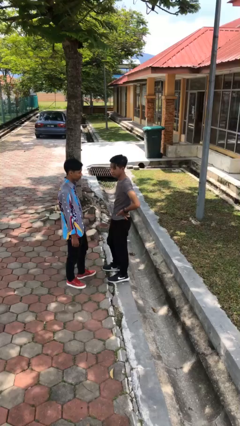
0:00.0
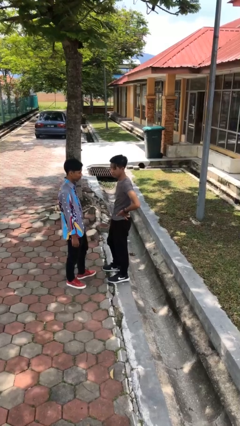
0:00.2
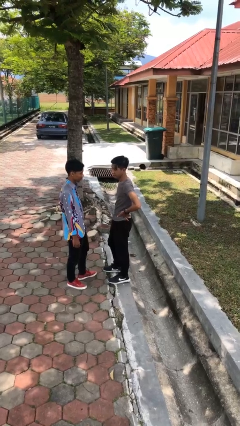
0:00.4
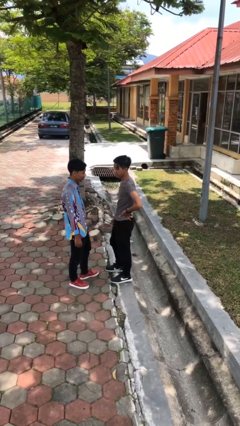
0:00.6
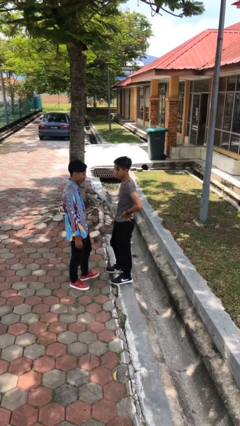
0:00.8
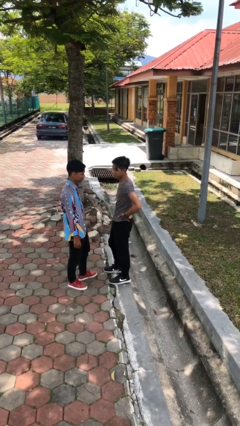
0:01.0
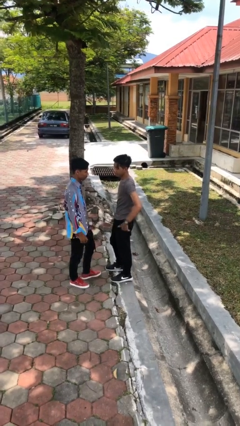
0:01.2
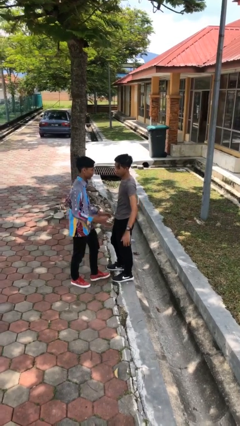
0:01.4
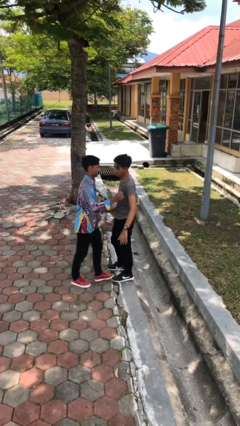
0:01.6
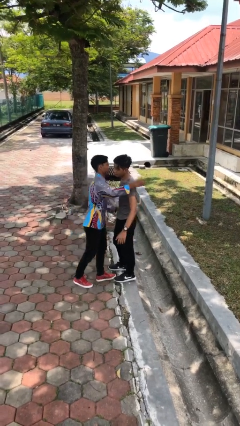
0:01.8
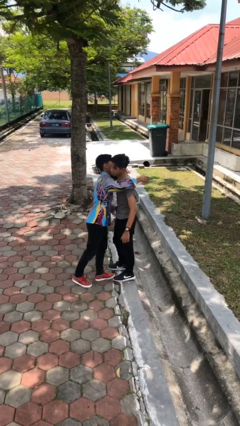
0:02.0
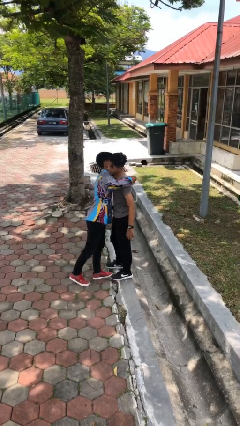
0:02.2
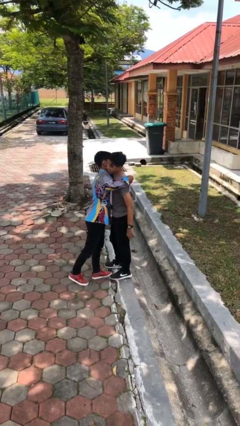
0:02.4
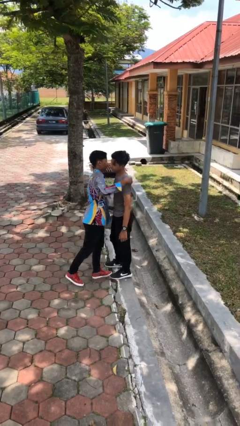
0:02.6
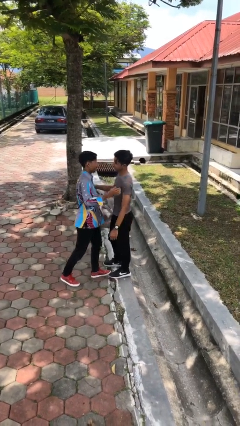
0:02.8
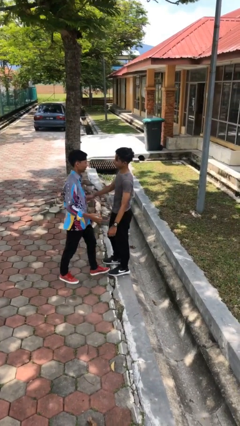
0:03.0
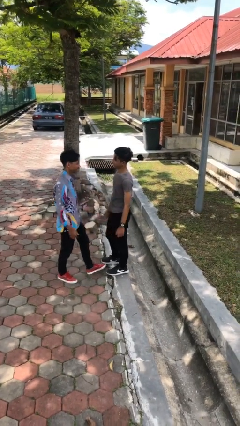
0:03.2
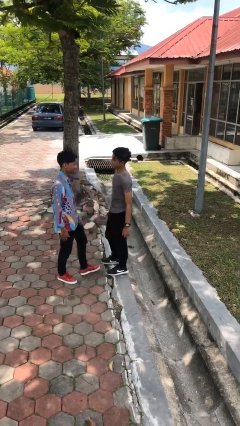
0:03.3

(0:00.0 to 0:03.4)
person embraces person

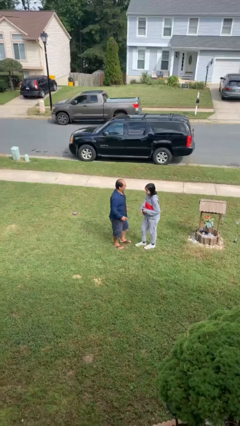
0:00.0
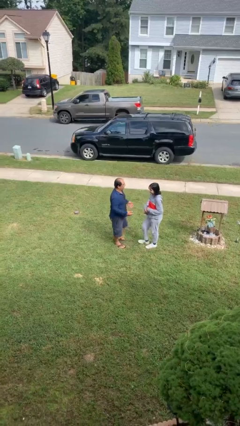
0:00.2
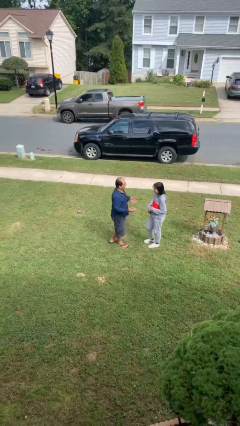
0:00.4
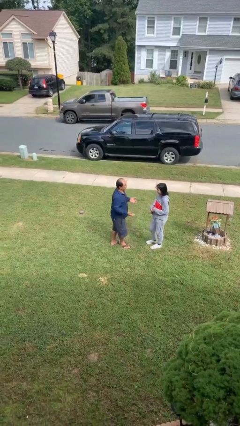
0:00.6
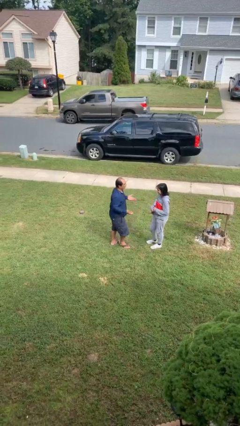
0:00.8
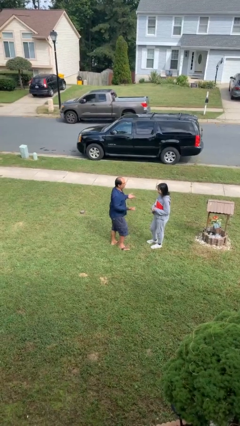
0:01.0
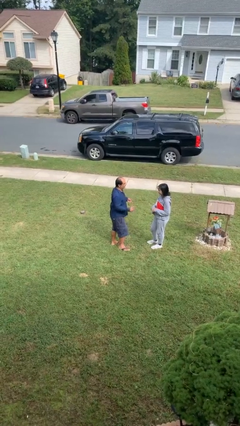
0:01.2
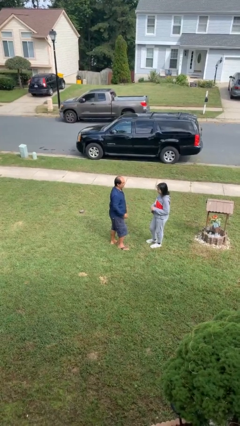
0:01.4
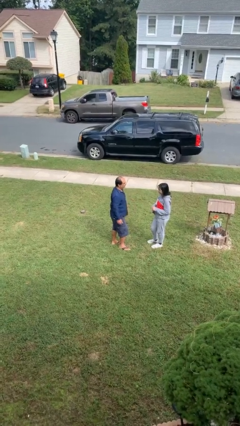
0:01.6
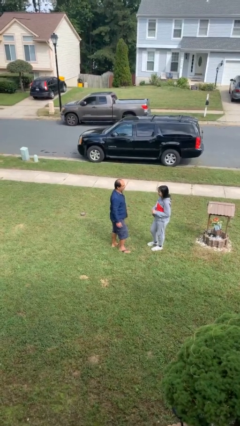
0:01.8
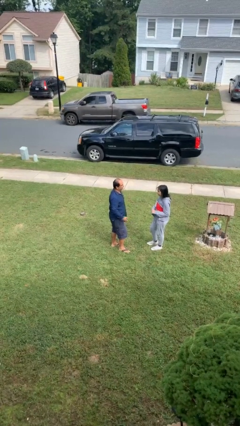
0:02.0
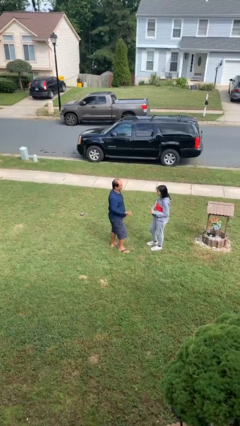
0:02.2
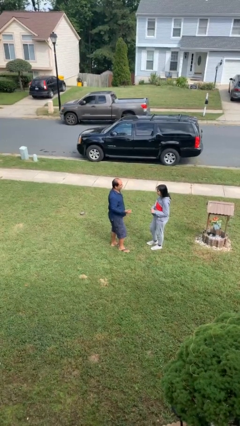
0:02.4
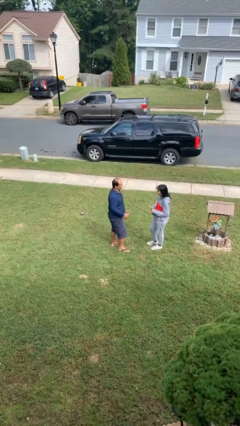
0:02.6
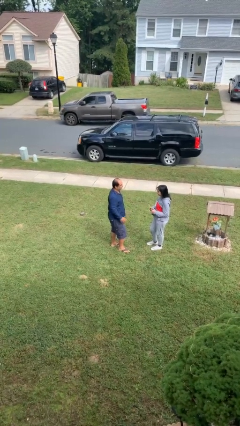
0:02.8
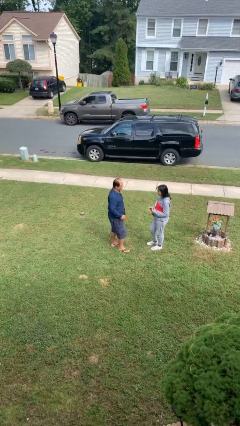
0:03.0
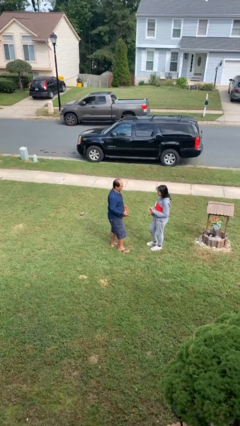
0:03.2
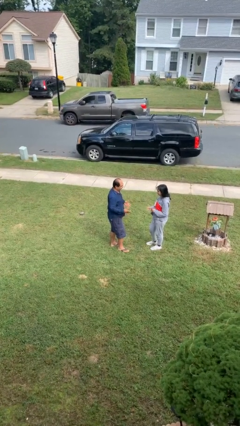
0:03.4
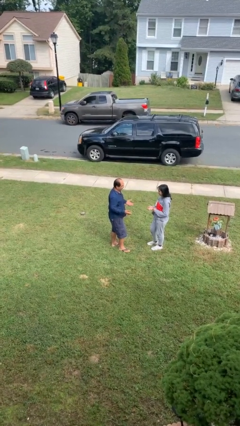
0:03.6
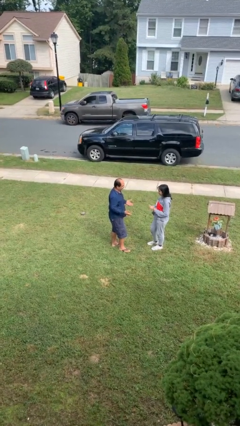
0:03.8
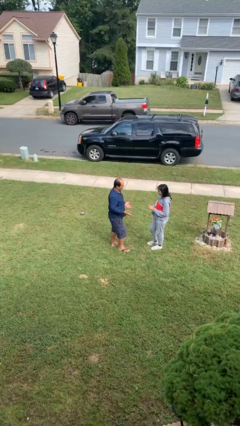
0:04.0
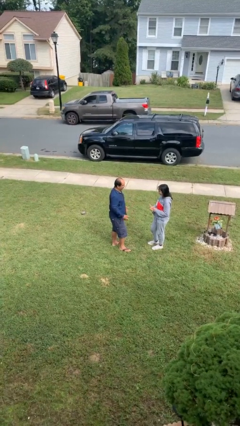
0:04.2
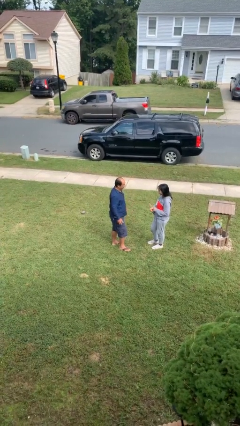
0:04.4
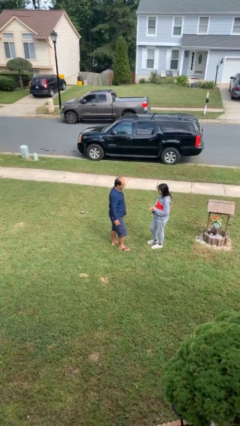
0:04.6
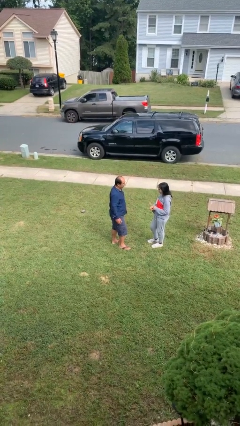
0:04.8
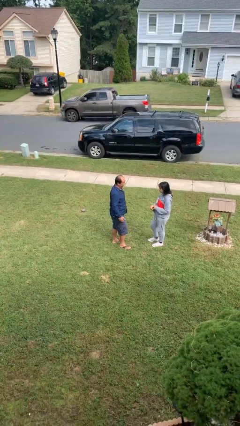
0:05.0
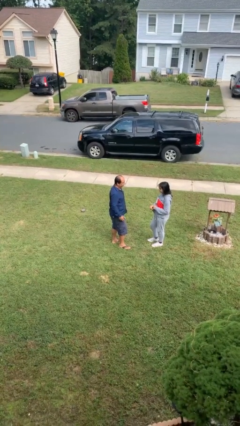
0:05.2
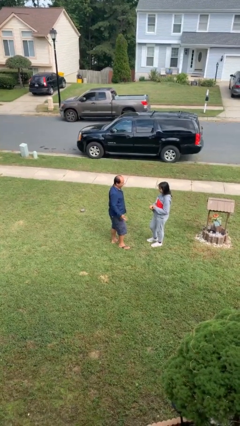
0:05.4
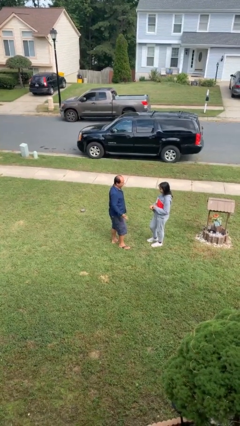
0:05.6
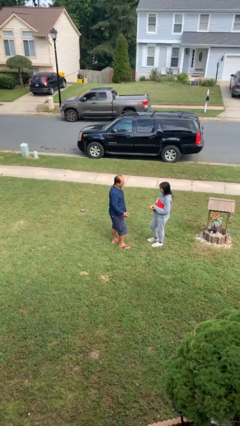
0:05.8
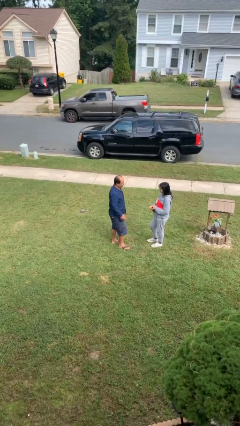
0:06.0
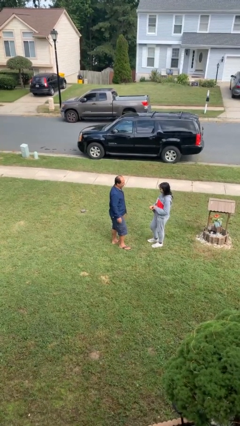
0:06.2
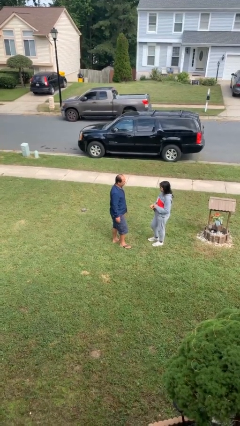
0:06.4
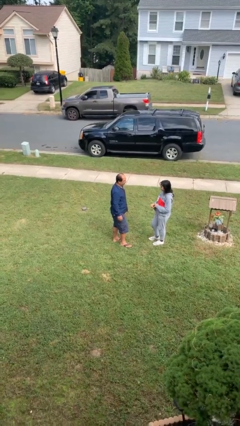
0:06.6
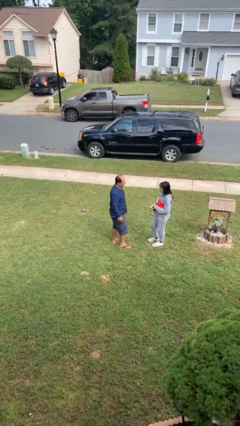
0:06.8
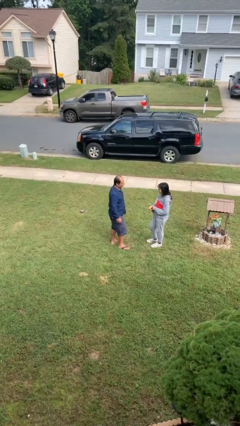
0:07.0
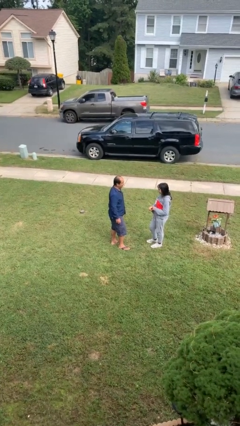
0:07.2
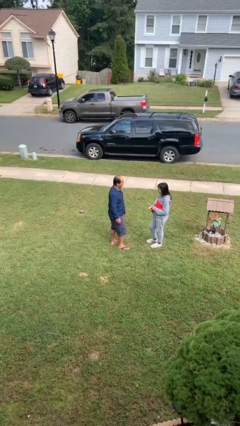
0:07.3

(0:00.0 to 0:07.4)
person talks to person

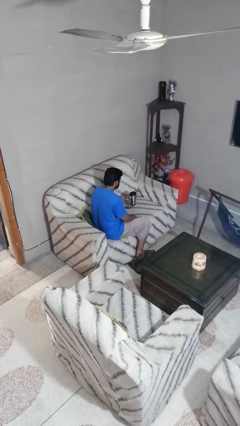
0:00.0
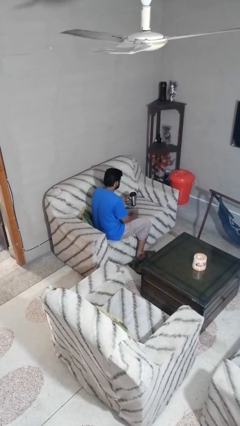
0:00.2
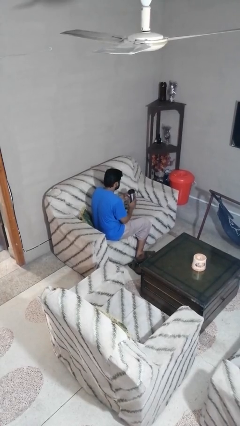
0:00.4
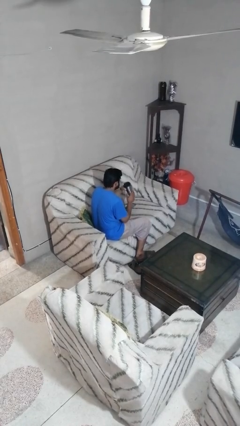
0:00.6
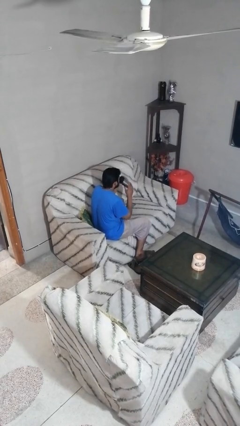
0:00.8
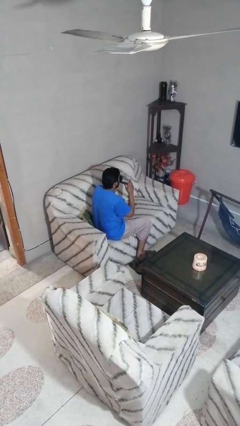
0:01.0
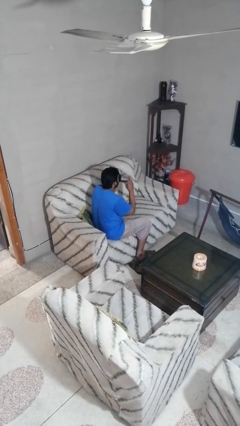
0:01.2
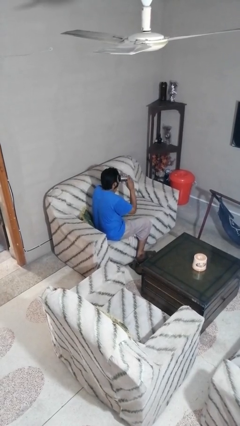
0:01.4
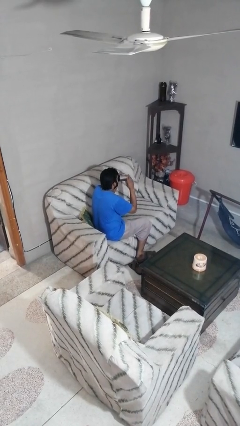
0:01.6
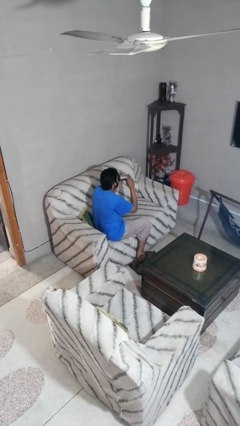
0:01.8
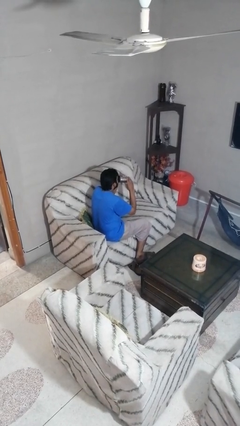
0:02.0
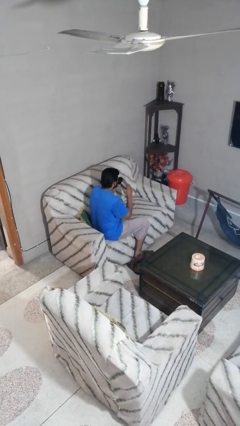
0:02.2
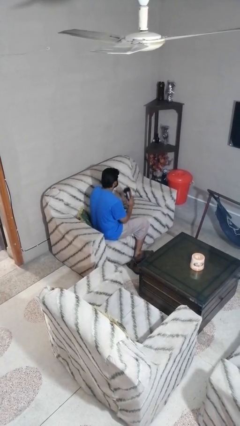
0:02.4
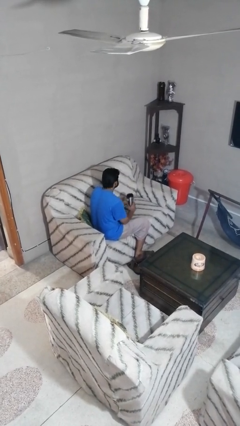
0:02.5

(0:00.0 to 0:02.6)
person drinks from beverage can

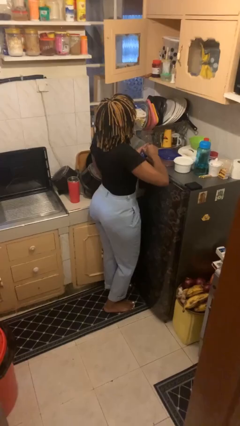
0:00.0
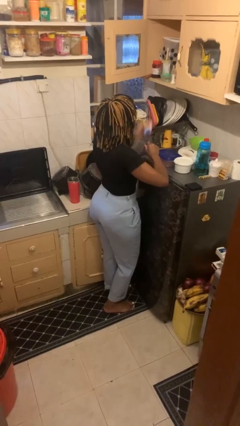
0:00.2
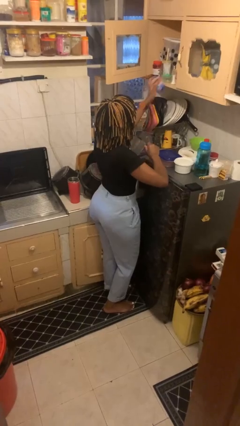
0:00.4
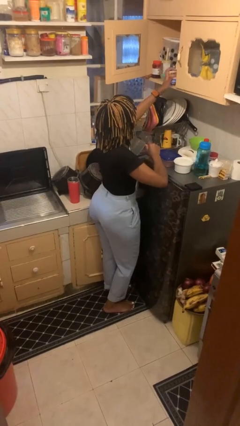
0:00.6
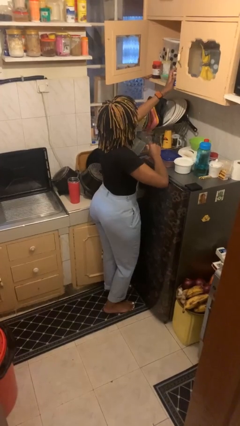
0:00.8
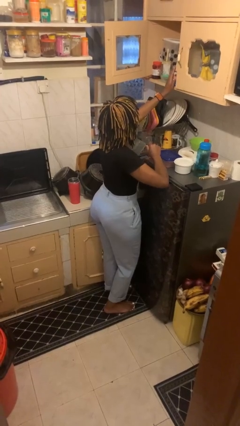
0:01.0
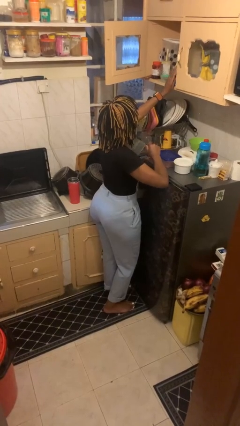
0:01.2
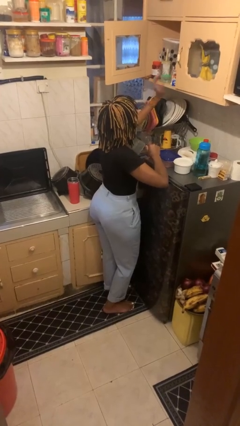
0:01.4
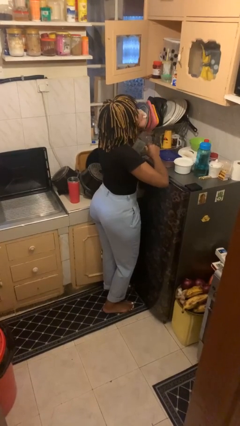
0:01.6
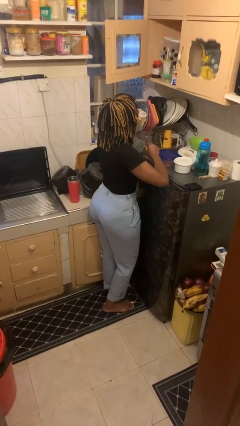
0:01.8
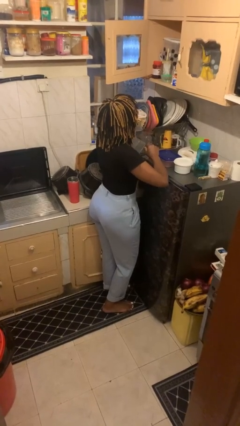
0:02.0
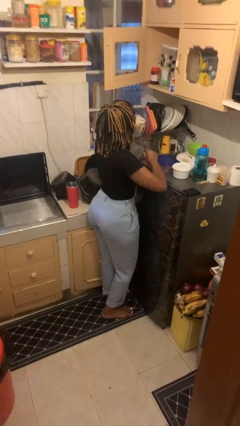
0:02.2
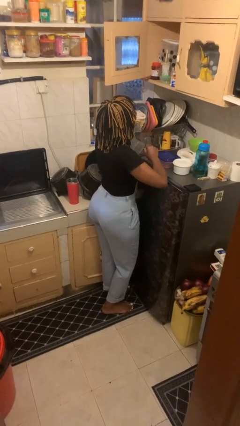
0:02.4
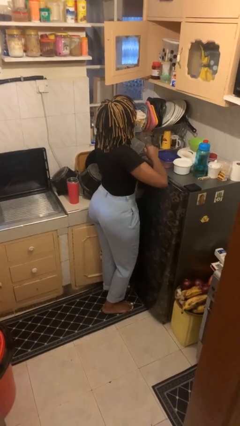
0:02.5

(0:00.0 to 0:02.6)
person puts object in cabinet

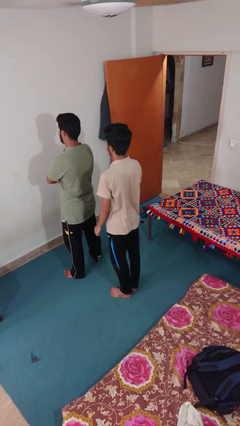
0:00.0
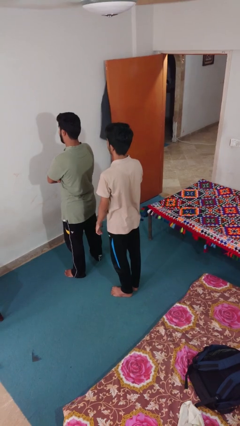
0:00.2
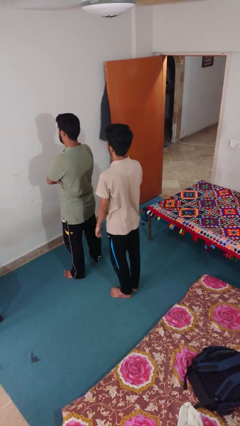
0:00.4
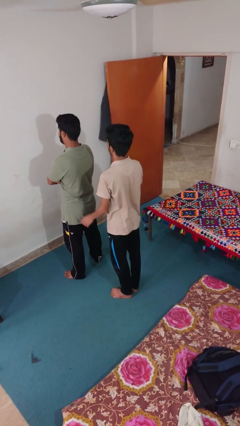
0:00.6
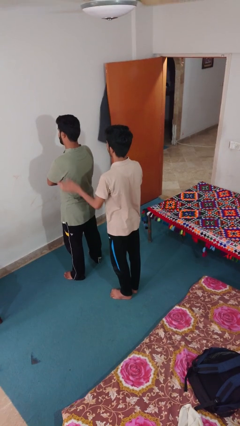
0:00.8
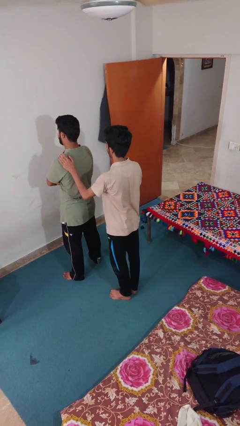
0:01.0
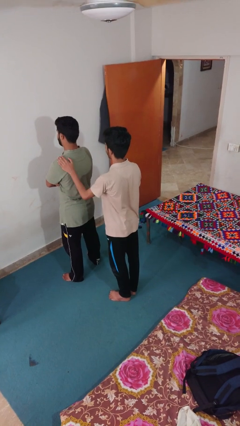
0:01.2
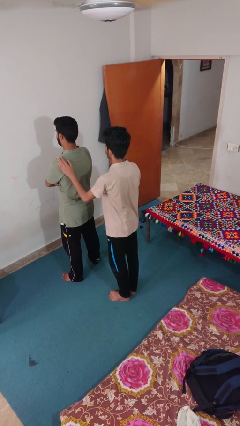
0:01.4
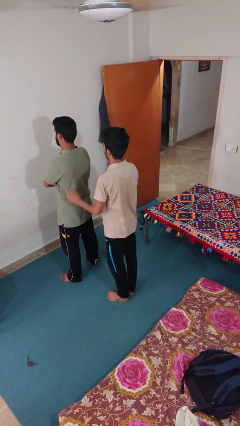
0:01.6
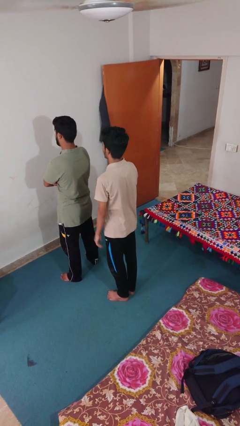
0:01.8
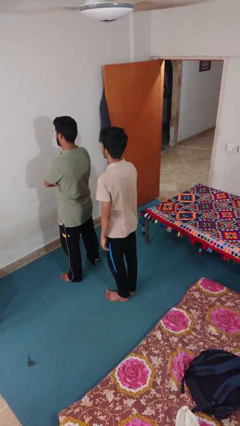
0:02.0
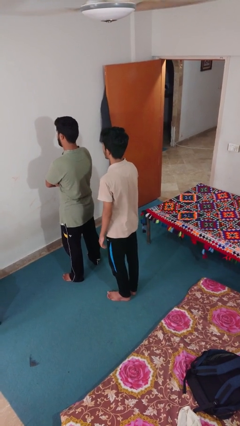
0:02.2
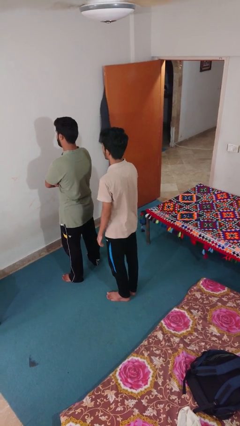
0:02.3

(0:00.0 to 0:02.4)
person touches back of person
